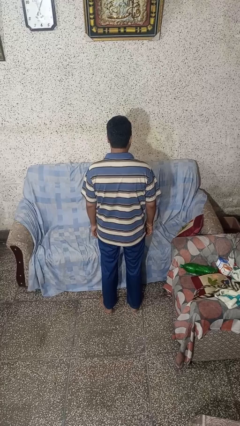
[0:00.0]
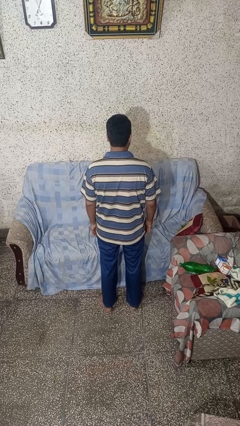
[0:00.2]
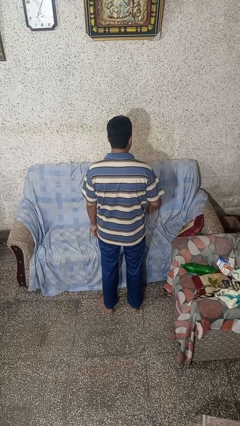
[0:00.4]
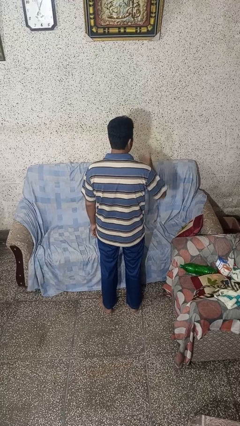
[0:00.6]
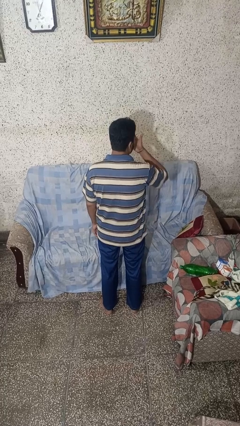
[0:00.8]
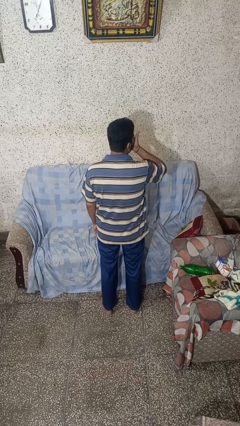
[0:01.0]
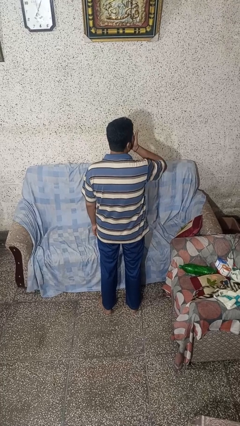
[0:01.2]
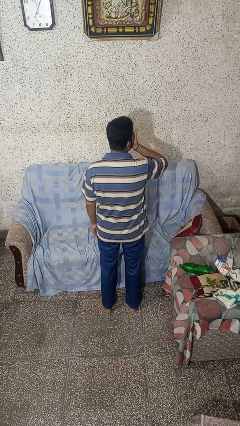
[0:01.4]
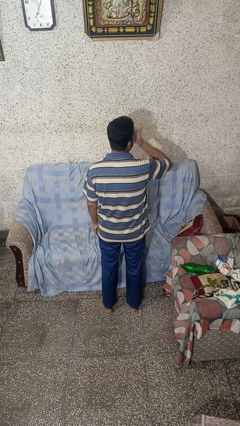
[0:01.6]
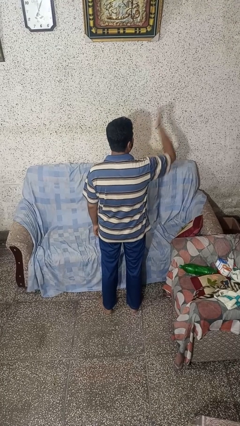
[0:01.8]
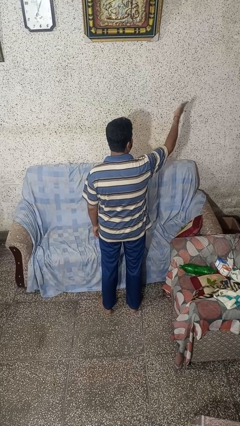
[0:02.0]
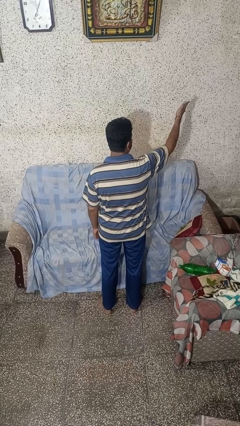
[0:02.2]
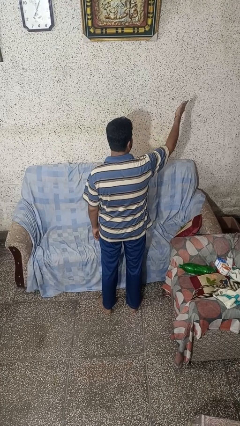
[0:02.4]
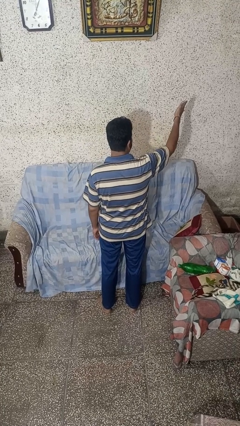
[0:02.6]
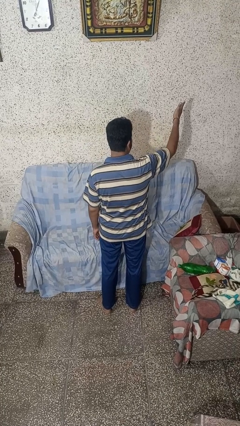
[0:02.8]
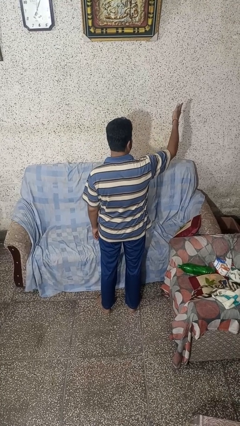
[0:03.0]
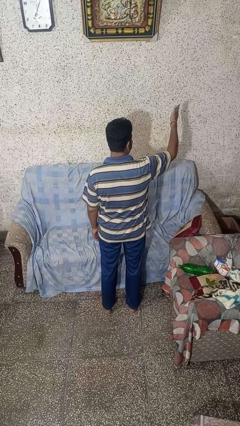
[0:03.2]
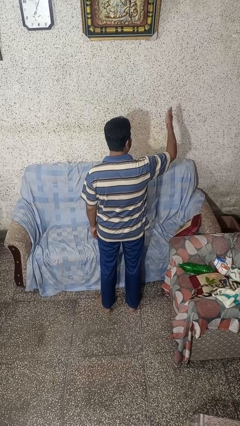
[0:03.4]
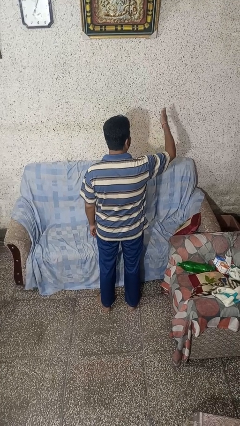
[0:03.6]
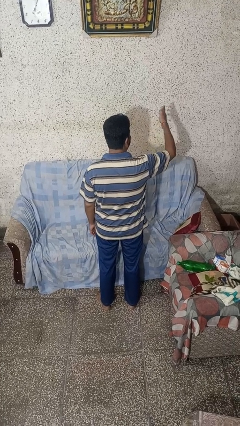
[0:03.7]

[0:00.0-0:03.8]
person gestures blow kiss

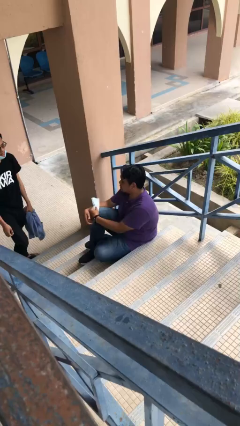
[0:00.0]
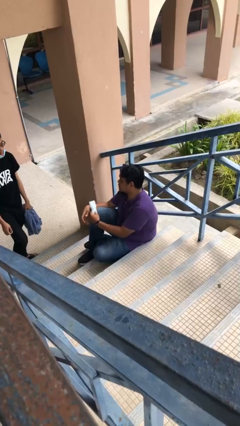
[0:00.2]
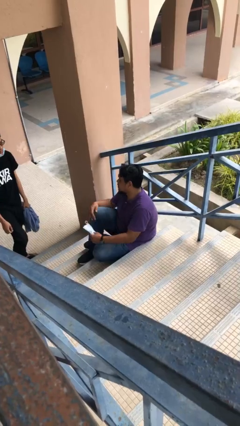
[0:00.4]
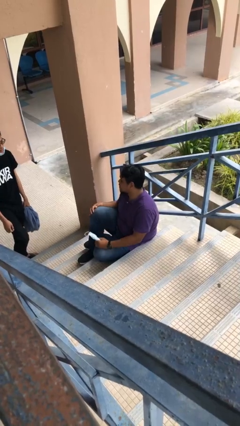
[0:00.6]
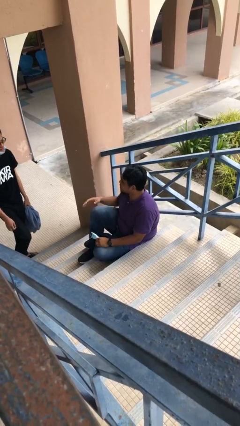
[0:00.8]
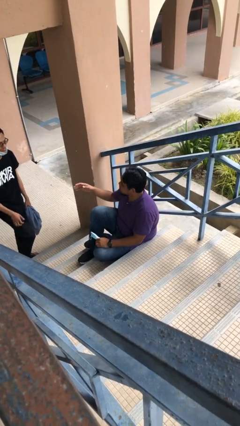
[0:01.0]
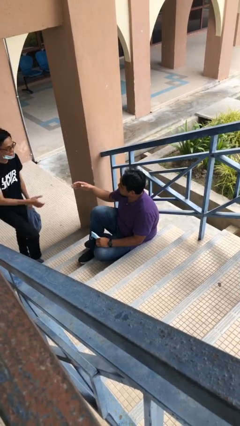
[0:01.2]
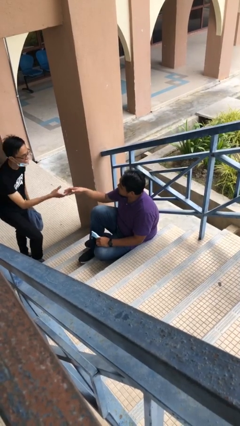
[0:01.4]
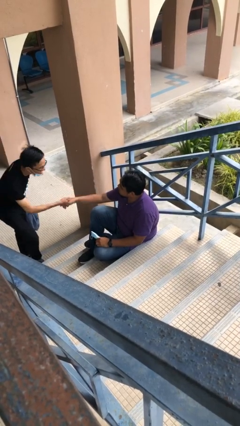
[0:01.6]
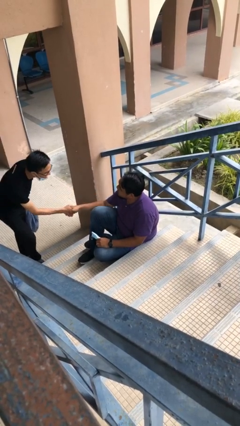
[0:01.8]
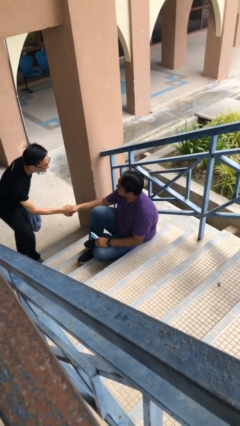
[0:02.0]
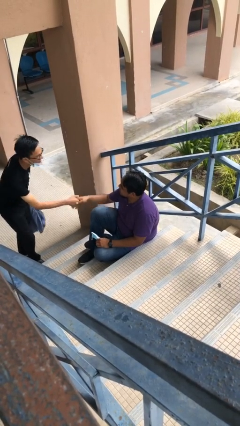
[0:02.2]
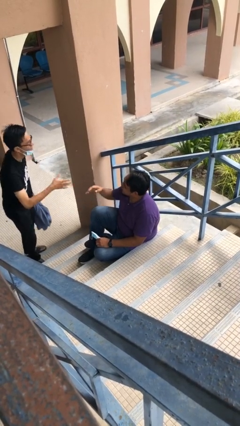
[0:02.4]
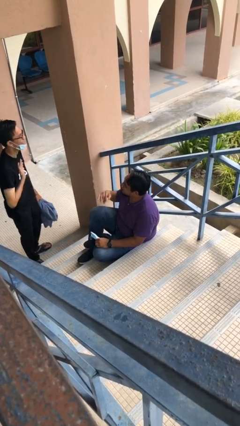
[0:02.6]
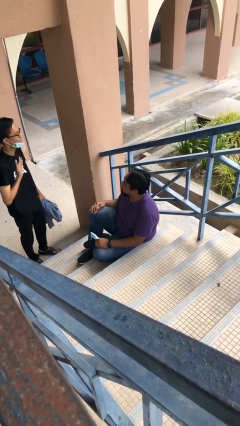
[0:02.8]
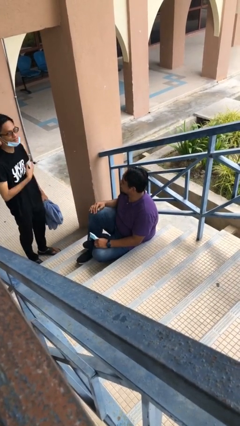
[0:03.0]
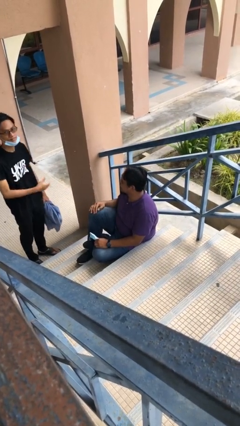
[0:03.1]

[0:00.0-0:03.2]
person shakes hand

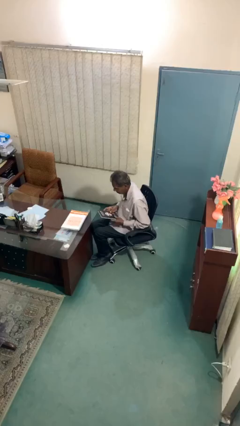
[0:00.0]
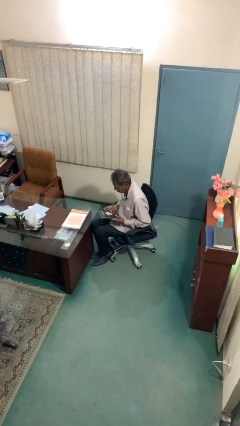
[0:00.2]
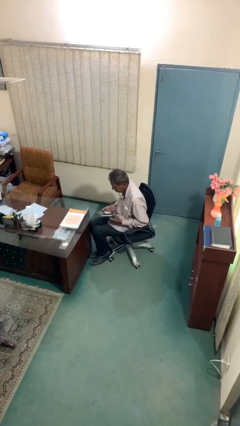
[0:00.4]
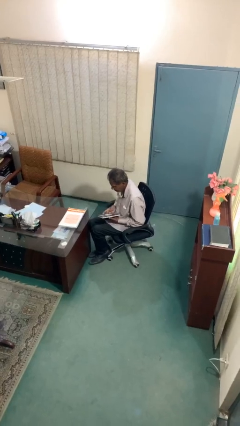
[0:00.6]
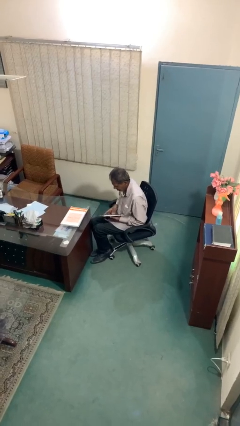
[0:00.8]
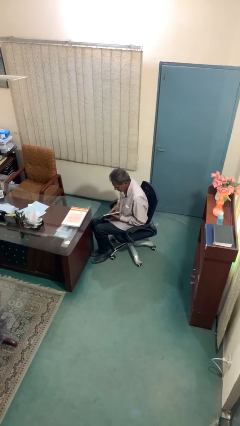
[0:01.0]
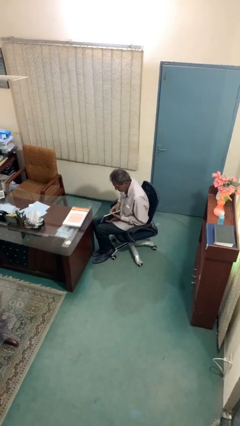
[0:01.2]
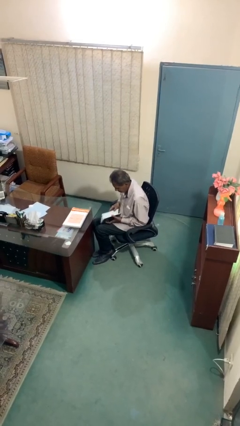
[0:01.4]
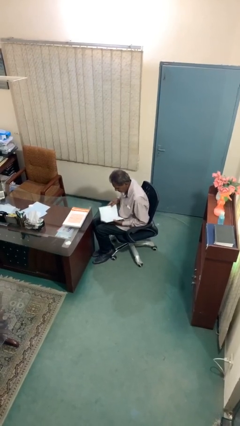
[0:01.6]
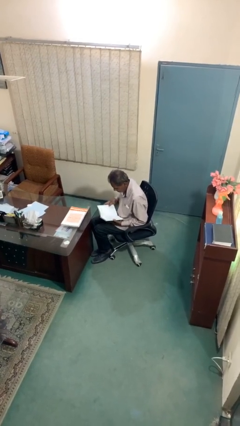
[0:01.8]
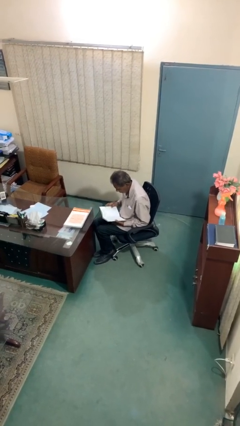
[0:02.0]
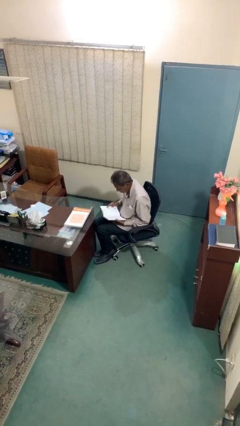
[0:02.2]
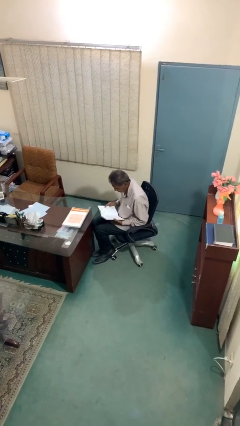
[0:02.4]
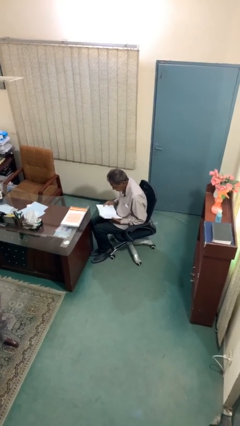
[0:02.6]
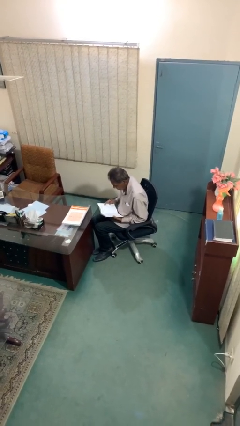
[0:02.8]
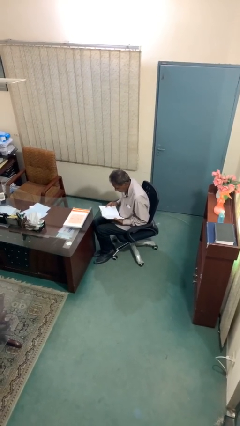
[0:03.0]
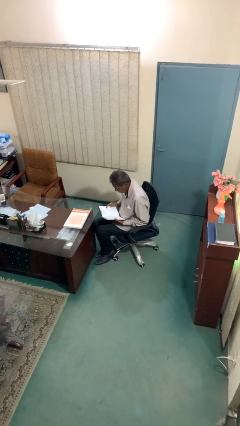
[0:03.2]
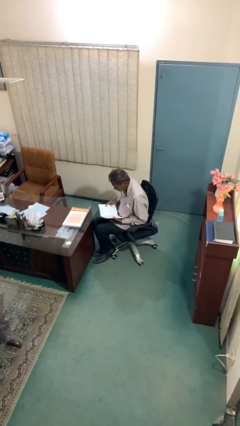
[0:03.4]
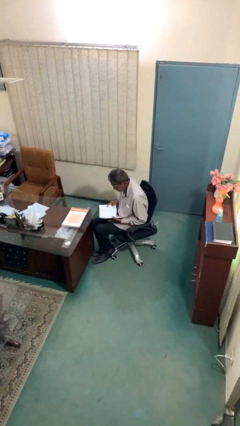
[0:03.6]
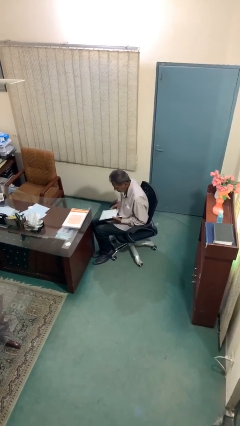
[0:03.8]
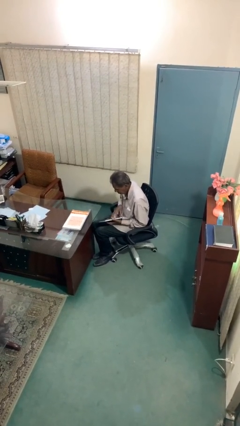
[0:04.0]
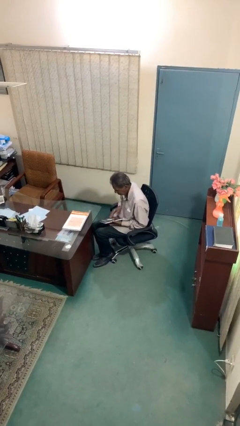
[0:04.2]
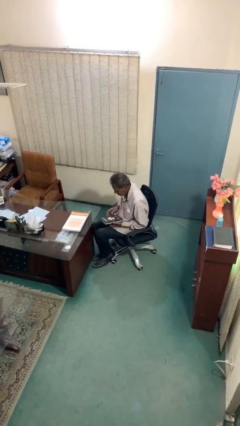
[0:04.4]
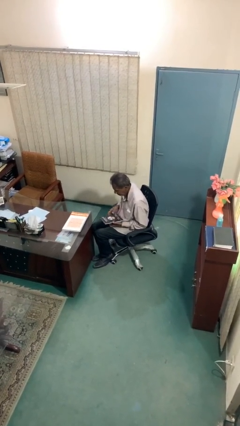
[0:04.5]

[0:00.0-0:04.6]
person reads document

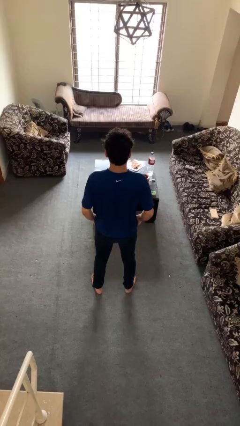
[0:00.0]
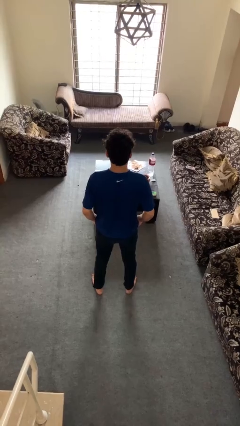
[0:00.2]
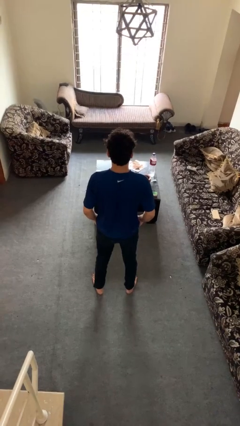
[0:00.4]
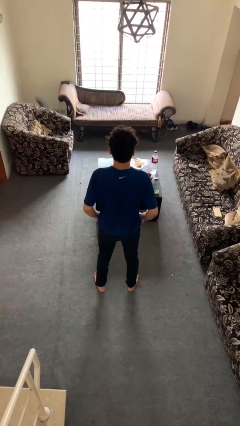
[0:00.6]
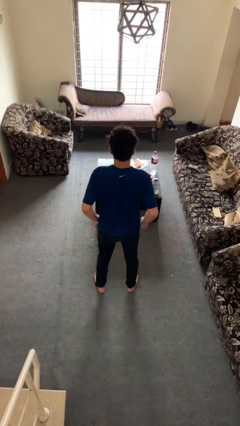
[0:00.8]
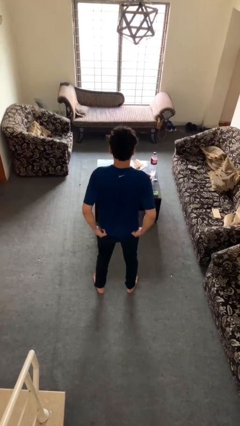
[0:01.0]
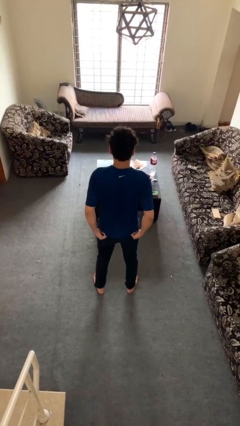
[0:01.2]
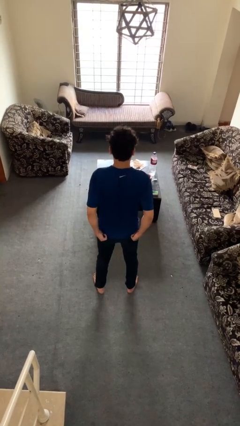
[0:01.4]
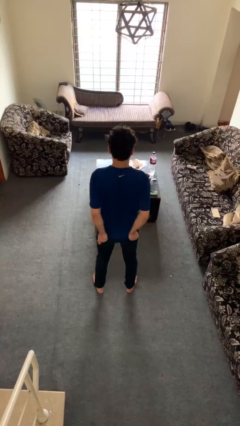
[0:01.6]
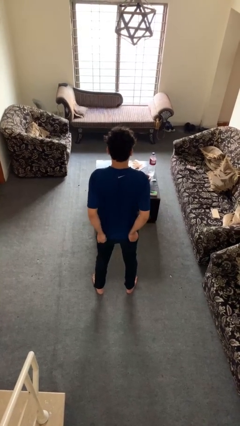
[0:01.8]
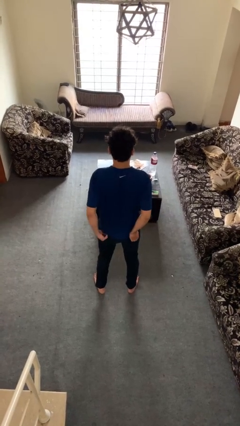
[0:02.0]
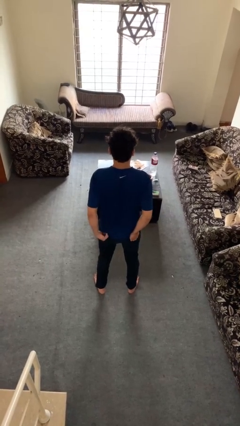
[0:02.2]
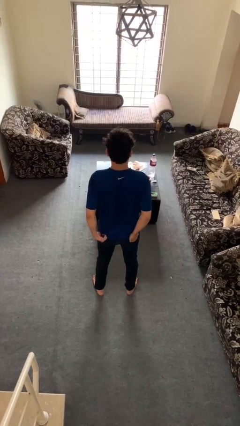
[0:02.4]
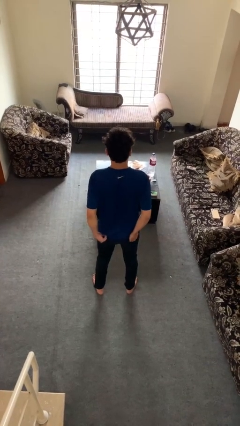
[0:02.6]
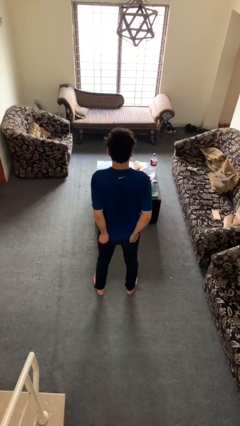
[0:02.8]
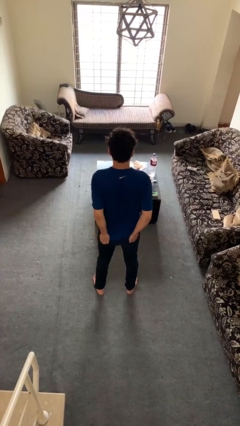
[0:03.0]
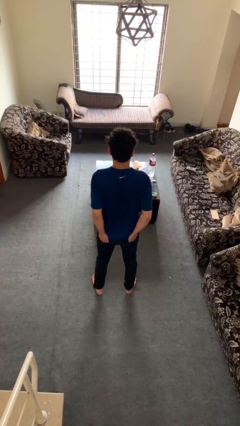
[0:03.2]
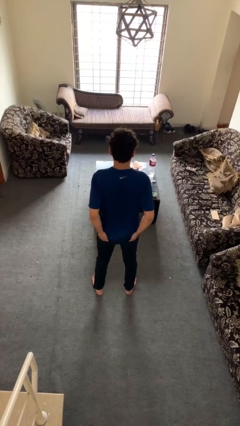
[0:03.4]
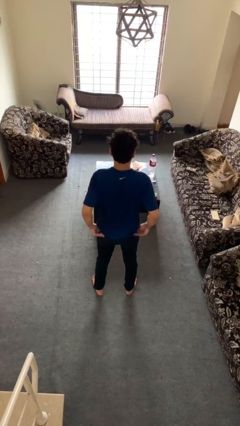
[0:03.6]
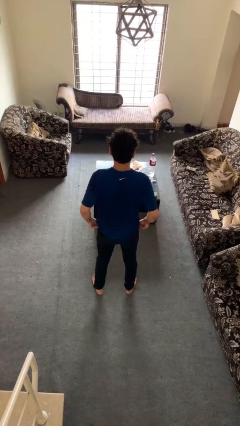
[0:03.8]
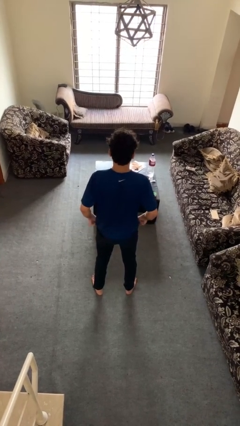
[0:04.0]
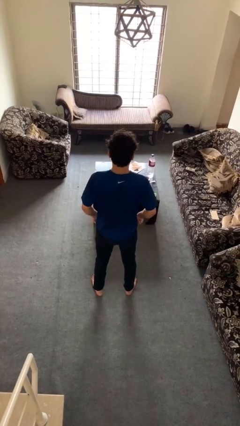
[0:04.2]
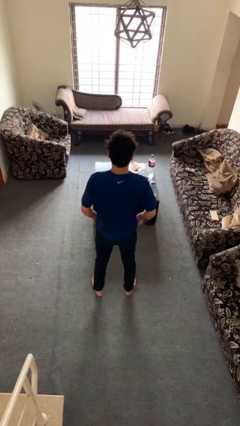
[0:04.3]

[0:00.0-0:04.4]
person puts hands in back pockets

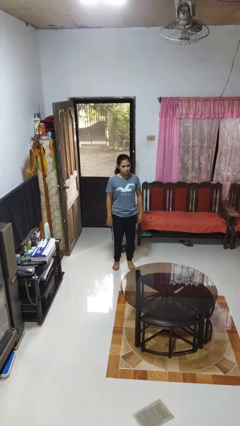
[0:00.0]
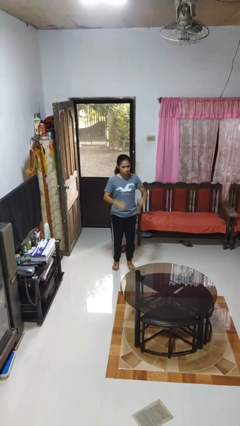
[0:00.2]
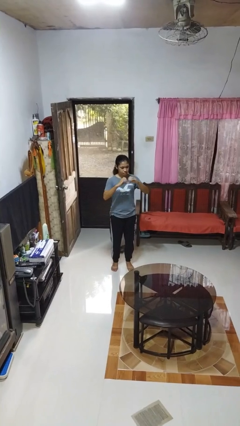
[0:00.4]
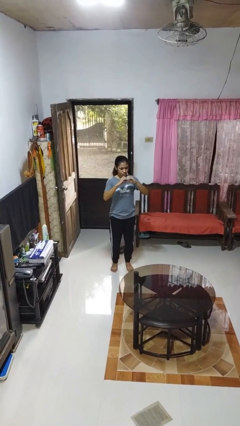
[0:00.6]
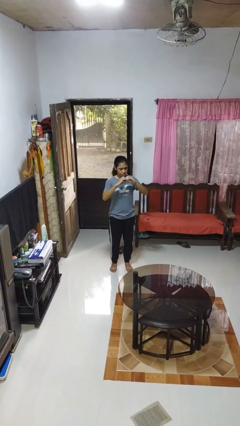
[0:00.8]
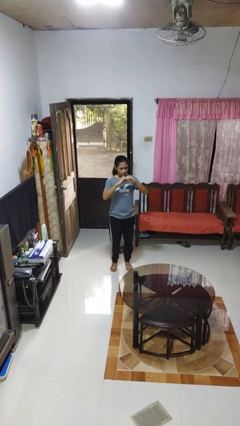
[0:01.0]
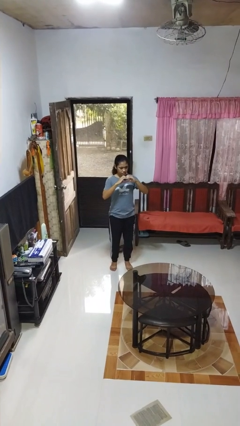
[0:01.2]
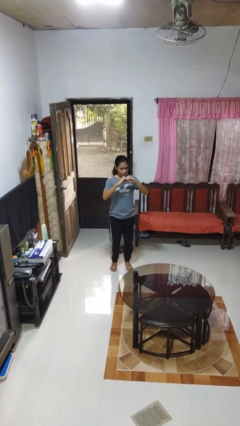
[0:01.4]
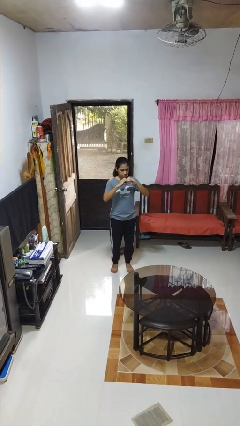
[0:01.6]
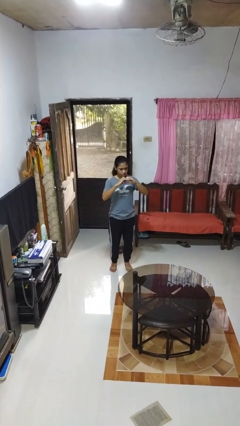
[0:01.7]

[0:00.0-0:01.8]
person gestures heart
